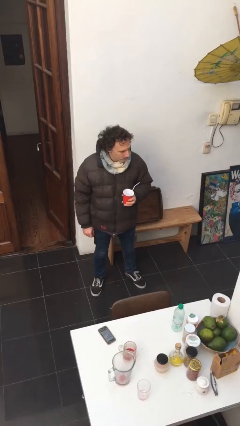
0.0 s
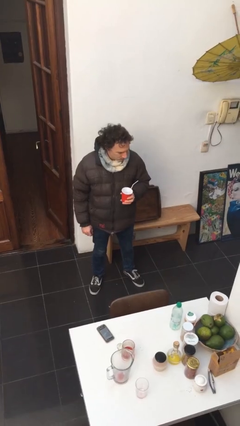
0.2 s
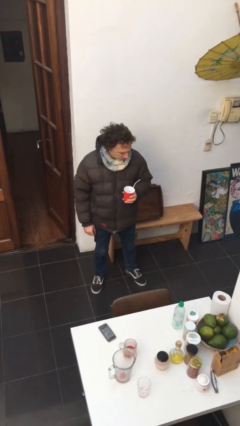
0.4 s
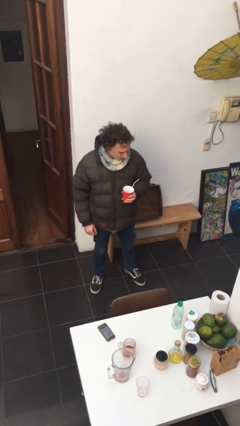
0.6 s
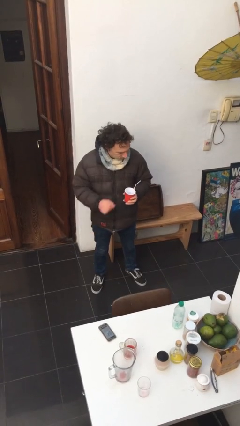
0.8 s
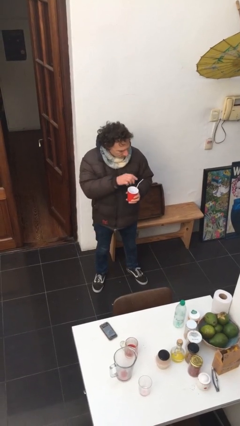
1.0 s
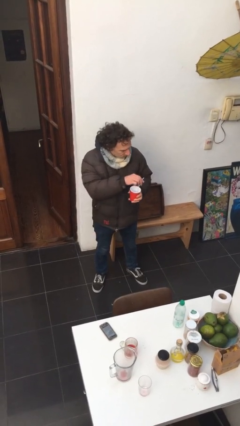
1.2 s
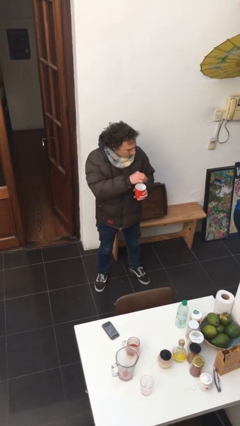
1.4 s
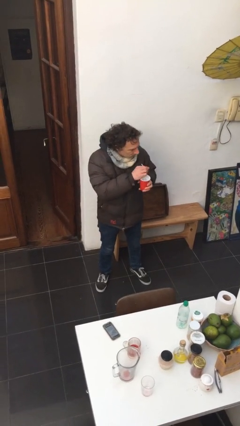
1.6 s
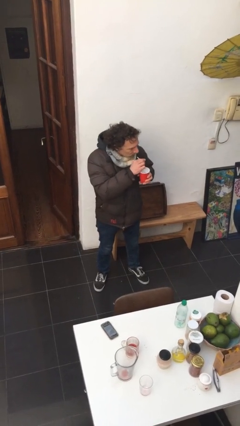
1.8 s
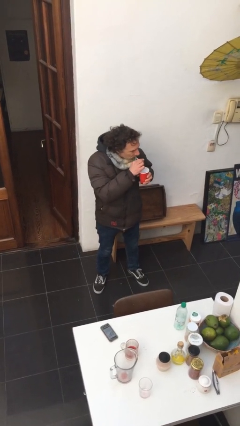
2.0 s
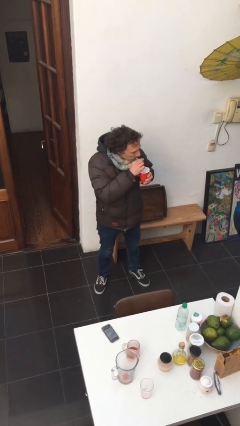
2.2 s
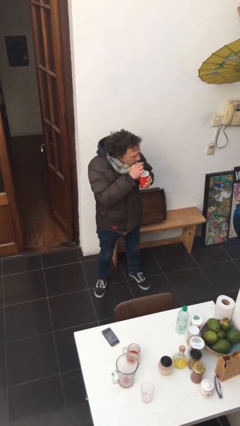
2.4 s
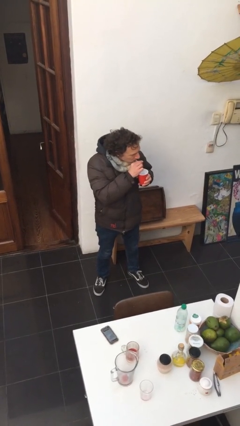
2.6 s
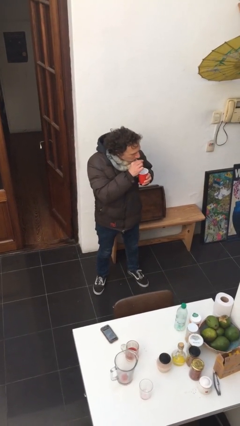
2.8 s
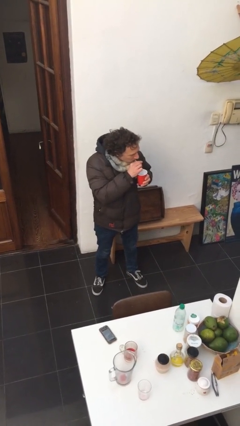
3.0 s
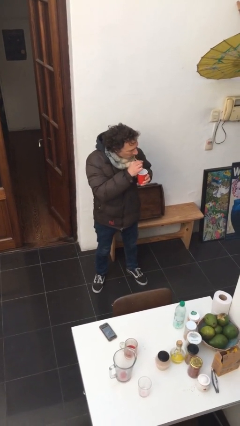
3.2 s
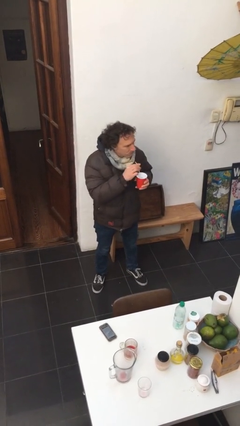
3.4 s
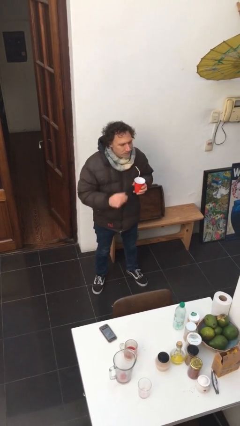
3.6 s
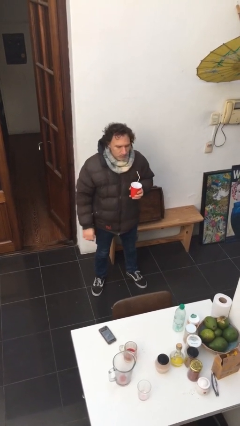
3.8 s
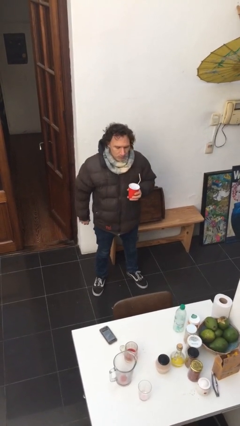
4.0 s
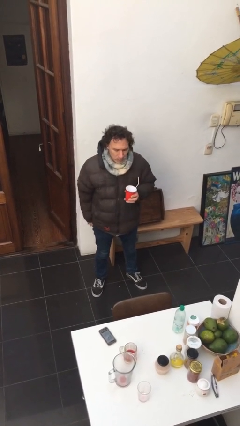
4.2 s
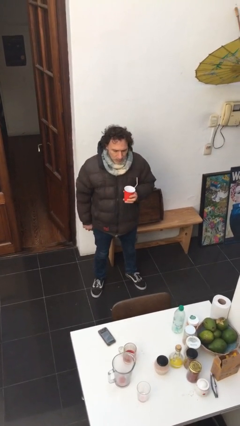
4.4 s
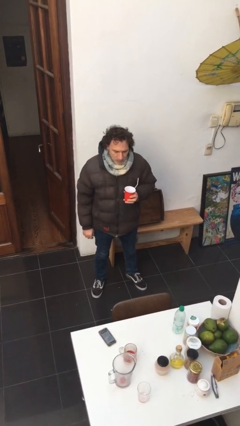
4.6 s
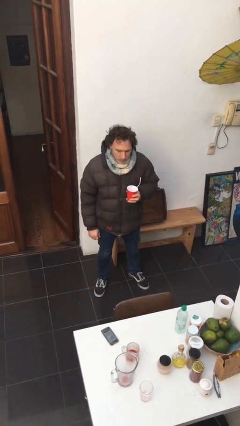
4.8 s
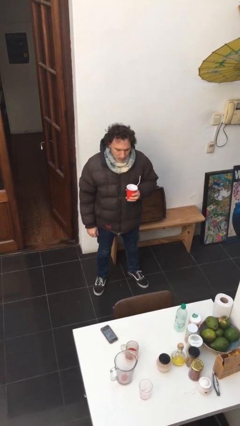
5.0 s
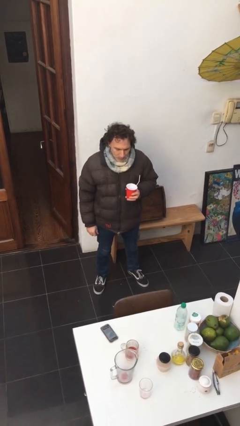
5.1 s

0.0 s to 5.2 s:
person drinks from straw

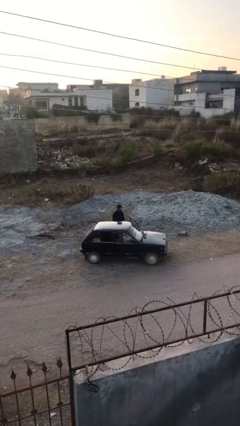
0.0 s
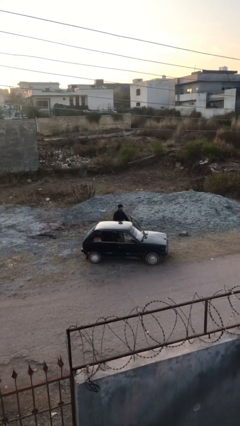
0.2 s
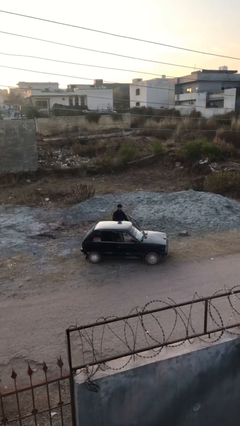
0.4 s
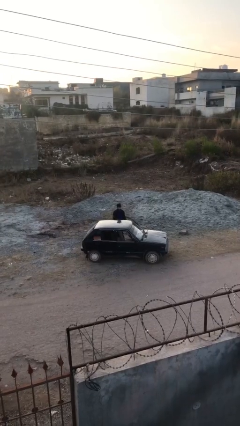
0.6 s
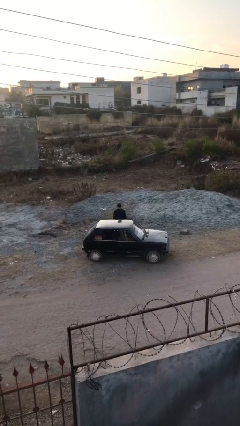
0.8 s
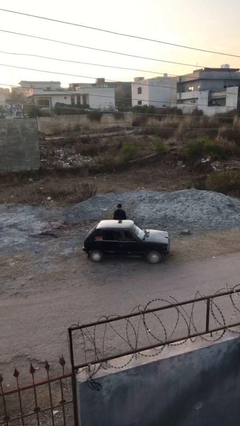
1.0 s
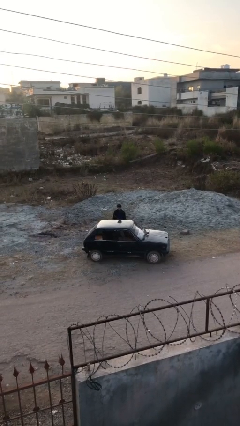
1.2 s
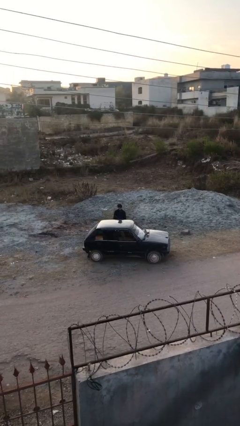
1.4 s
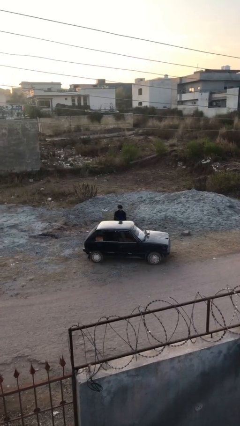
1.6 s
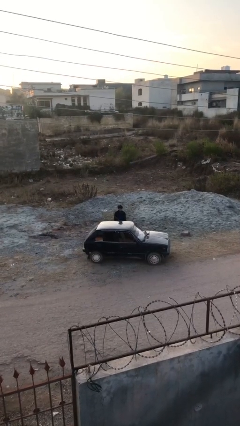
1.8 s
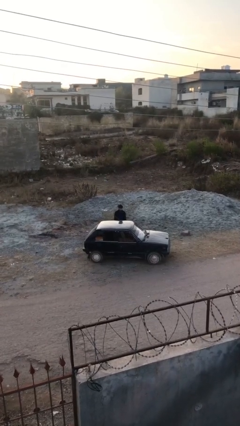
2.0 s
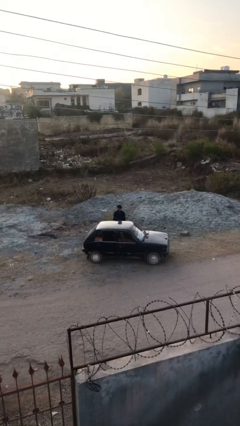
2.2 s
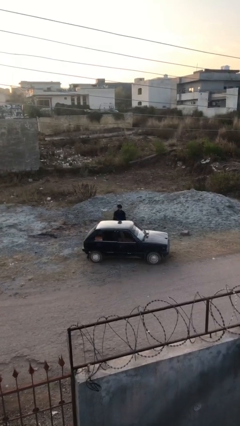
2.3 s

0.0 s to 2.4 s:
person closes car door

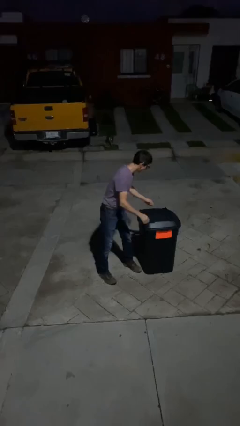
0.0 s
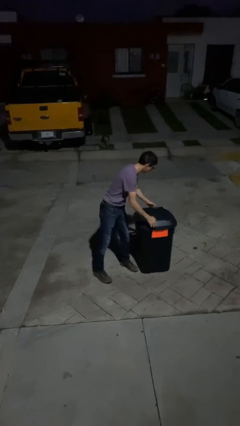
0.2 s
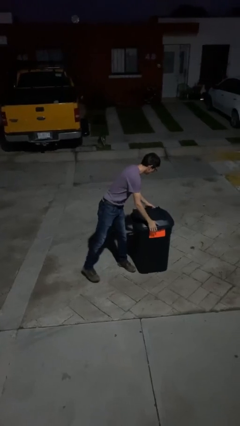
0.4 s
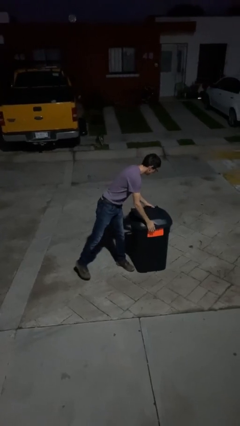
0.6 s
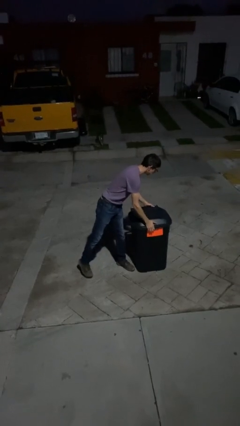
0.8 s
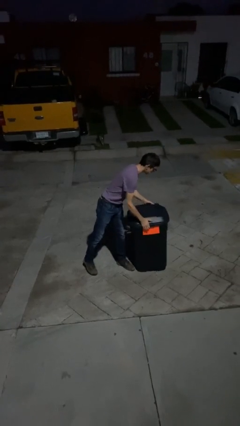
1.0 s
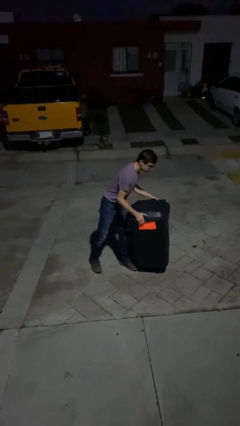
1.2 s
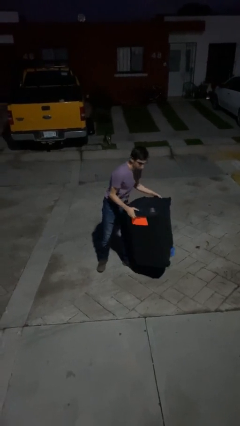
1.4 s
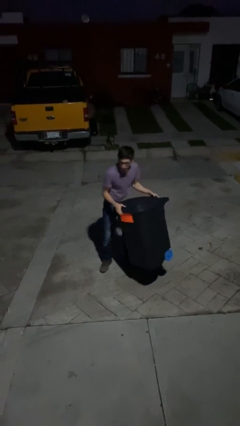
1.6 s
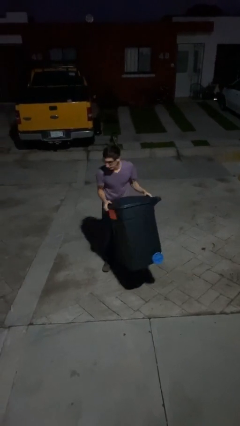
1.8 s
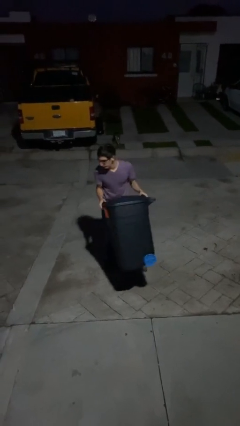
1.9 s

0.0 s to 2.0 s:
person picks up object from floor

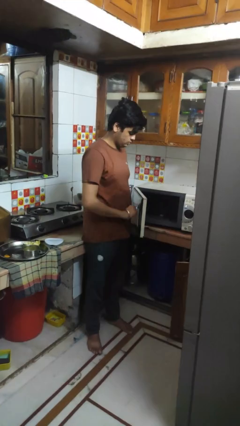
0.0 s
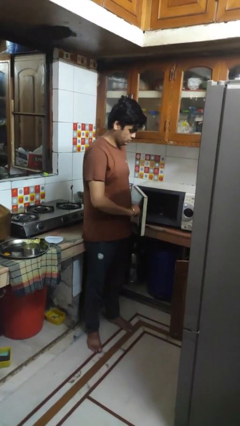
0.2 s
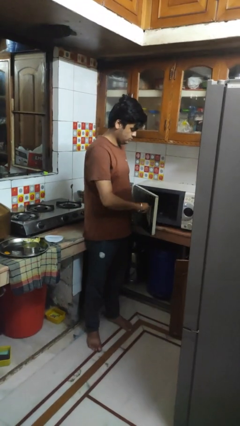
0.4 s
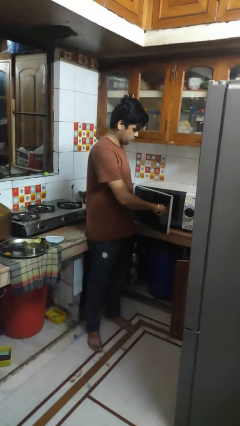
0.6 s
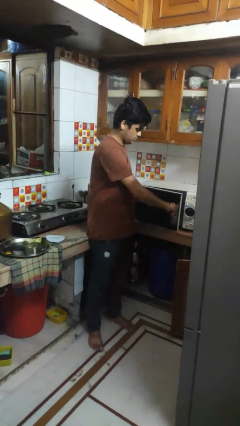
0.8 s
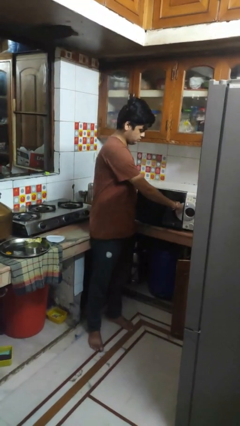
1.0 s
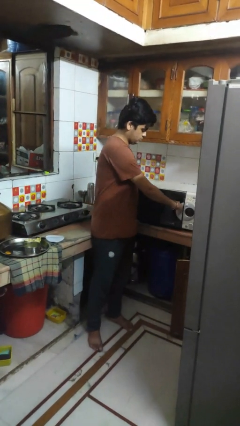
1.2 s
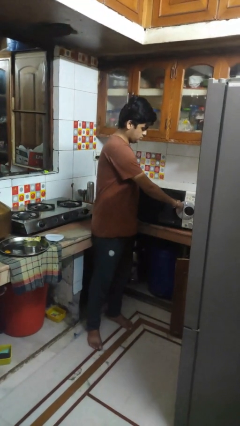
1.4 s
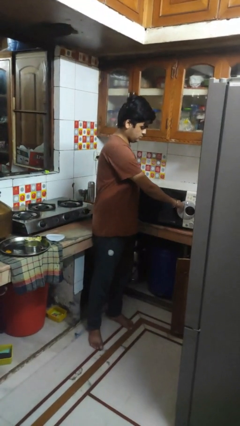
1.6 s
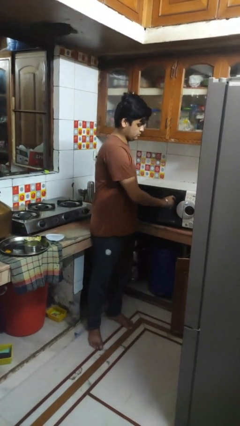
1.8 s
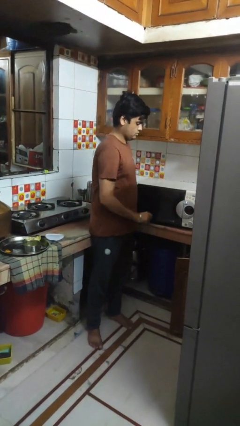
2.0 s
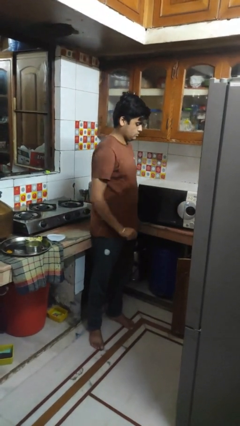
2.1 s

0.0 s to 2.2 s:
person closes oven door

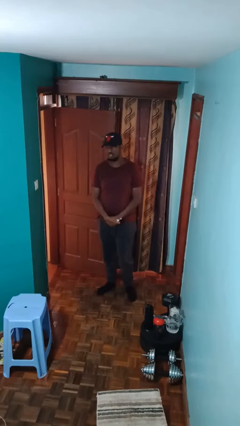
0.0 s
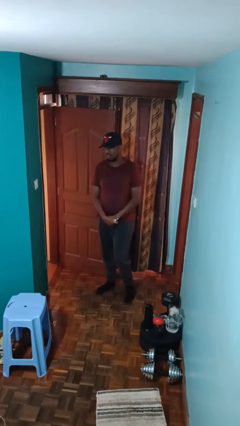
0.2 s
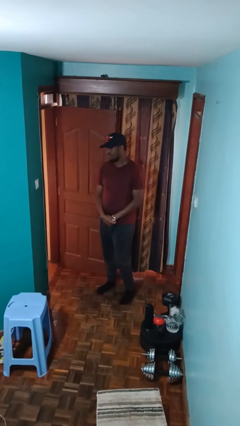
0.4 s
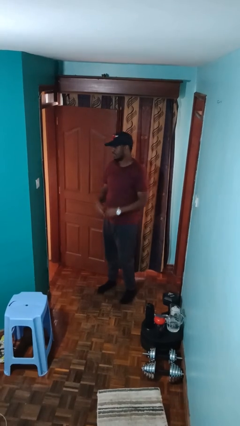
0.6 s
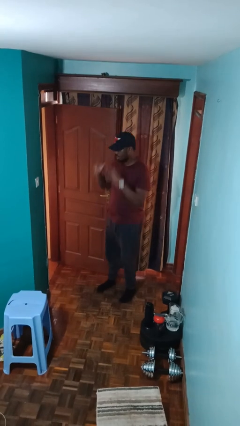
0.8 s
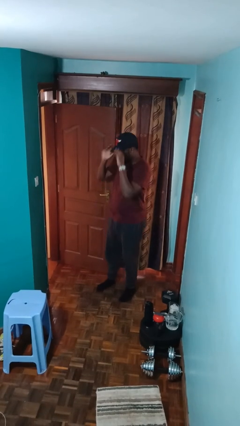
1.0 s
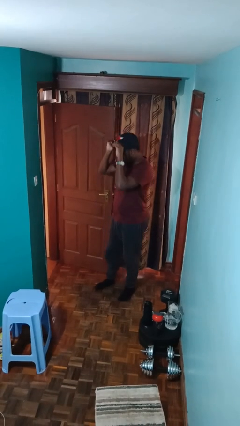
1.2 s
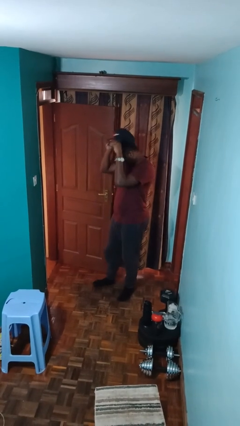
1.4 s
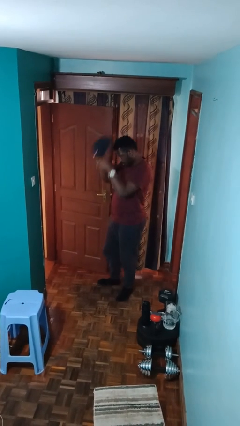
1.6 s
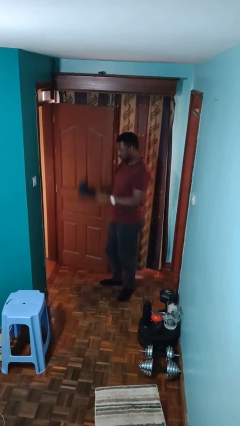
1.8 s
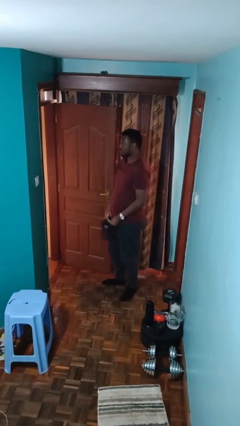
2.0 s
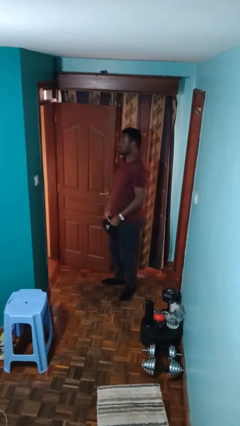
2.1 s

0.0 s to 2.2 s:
person takes off hat

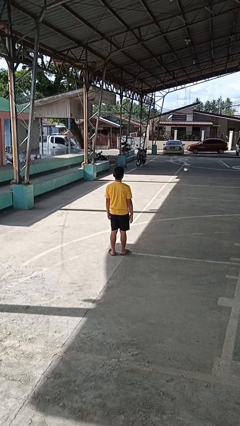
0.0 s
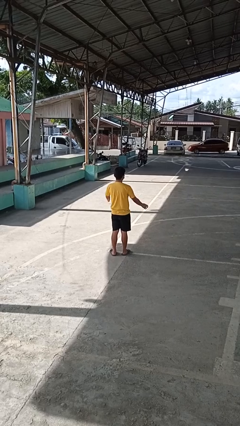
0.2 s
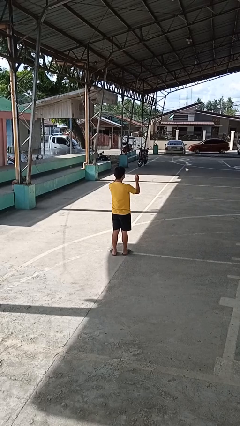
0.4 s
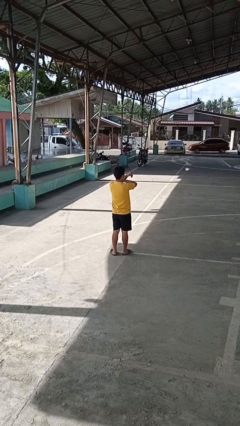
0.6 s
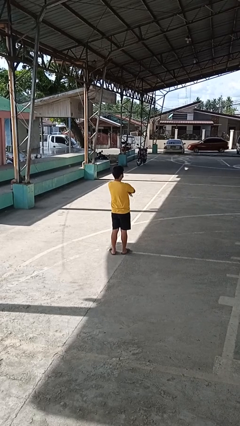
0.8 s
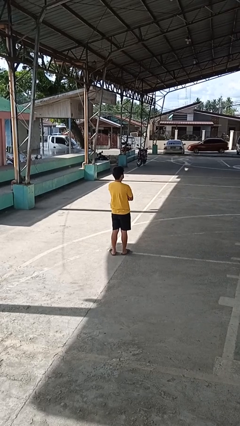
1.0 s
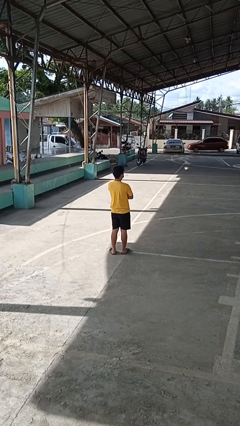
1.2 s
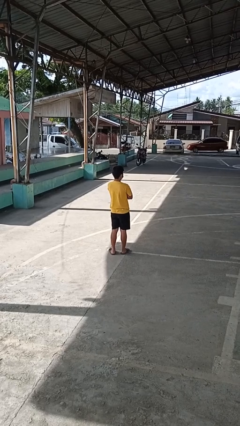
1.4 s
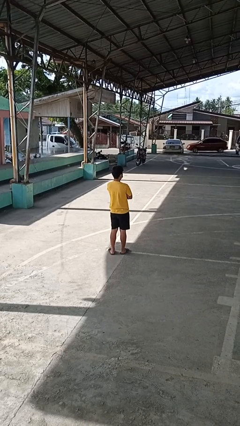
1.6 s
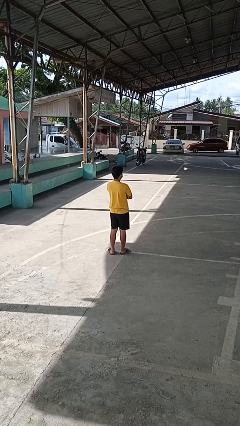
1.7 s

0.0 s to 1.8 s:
person crosses arms

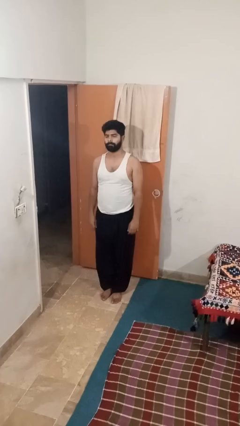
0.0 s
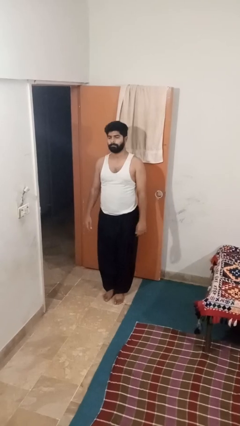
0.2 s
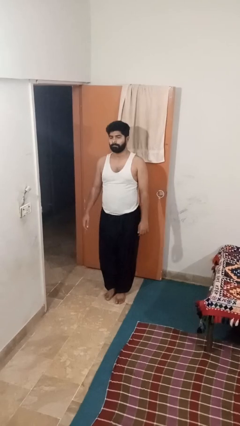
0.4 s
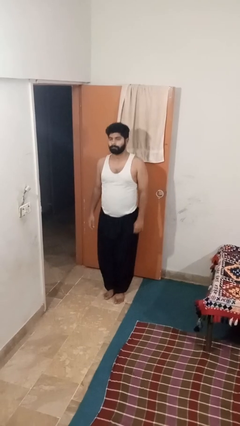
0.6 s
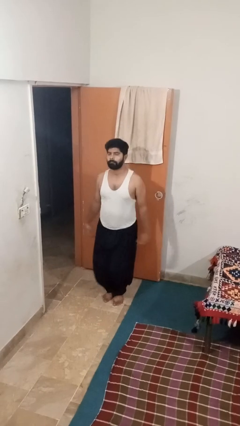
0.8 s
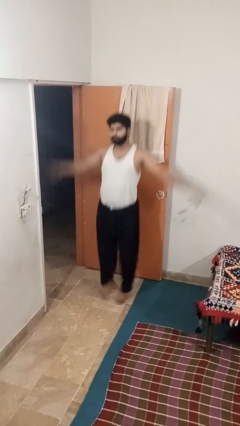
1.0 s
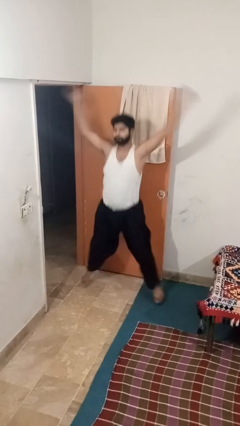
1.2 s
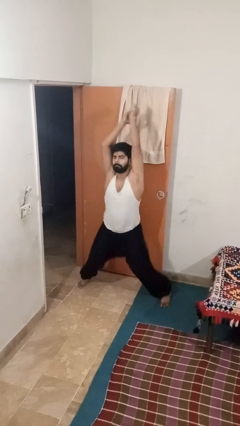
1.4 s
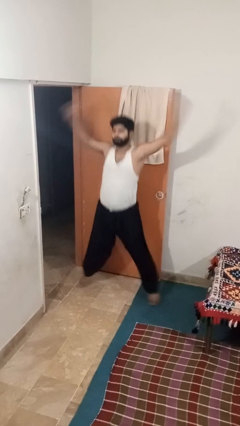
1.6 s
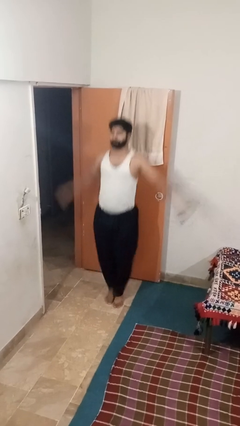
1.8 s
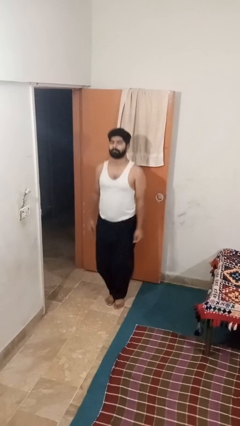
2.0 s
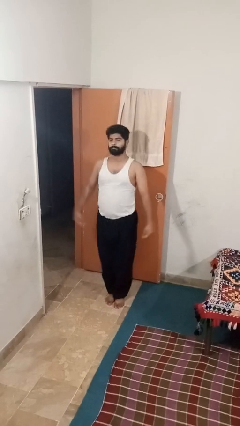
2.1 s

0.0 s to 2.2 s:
person exercises with jumping jacks
